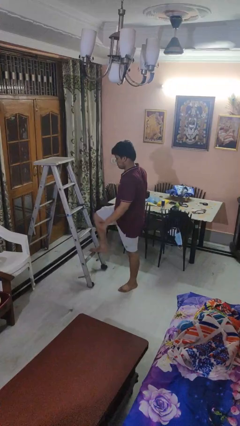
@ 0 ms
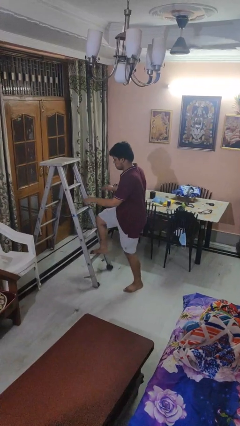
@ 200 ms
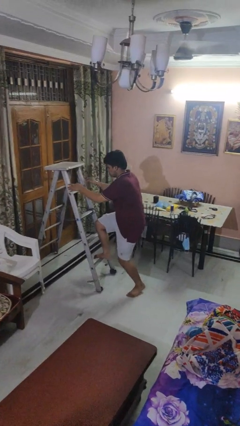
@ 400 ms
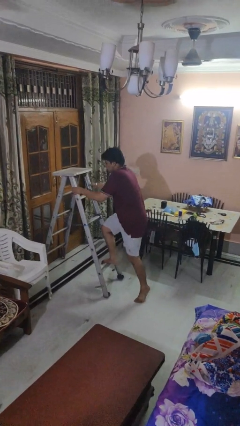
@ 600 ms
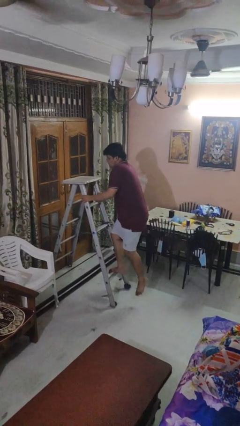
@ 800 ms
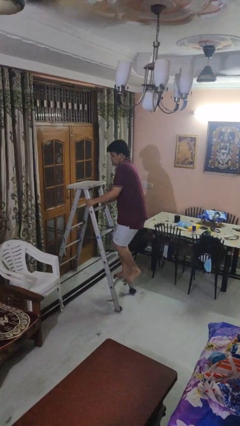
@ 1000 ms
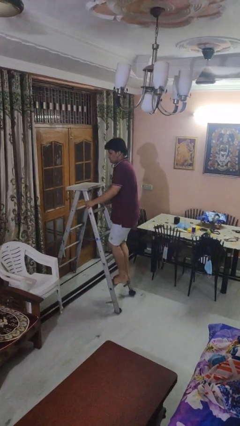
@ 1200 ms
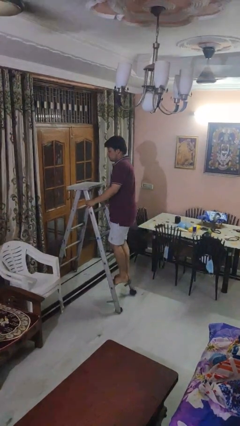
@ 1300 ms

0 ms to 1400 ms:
person climbs up ladder

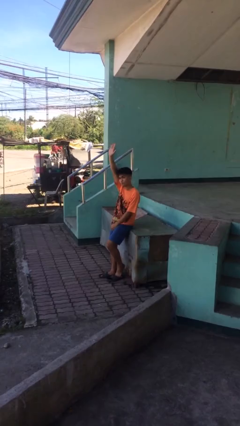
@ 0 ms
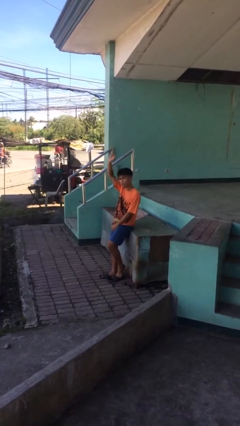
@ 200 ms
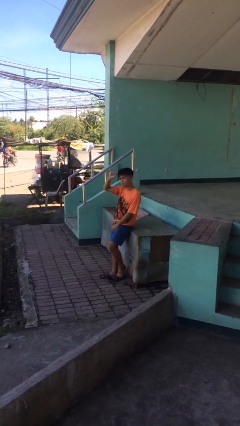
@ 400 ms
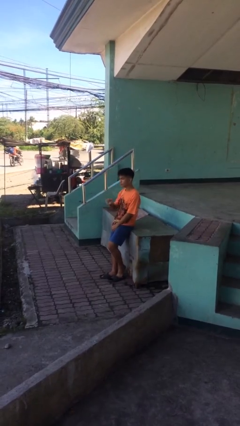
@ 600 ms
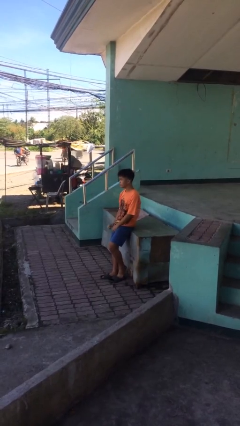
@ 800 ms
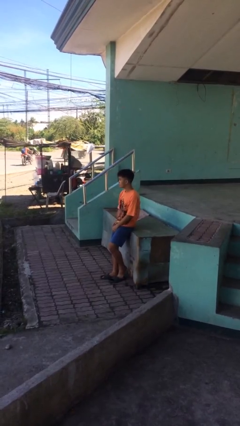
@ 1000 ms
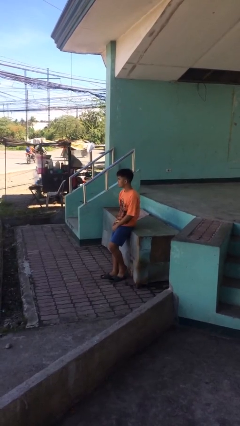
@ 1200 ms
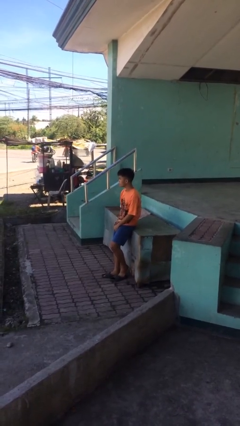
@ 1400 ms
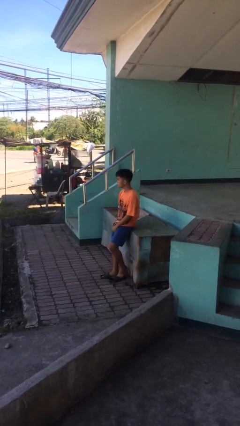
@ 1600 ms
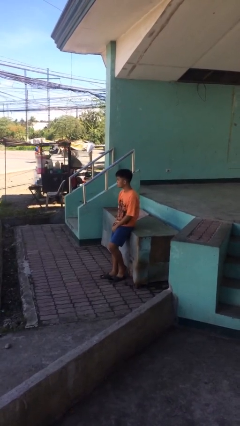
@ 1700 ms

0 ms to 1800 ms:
person gestures lower hand

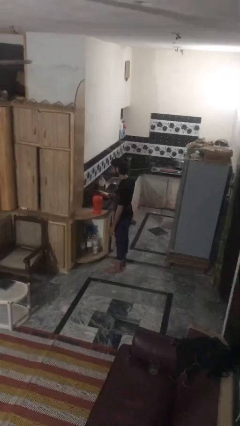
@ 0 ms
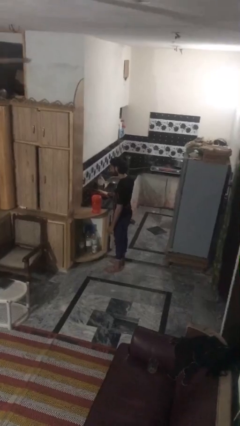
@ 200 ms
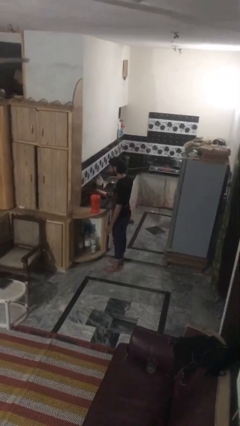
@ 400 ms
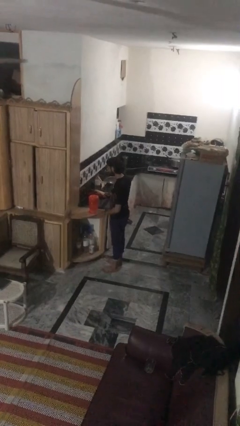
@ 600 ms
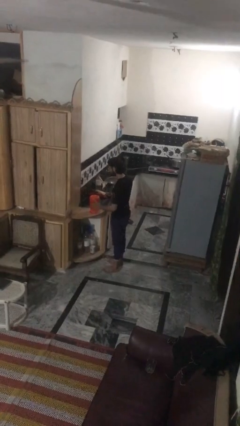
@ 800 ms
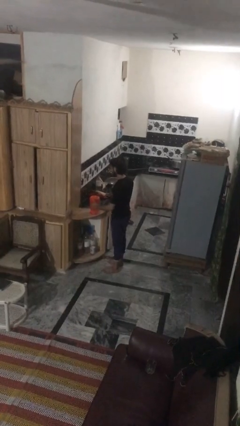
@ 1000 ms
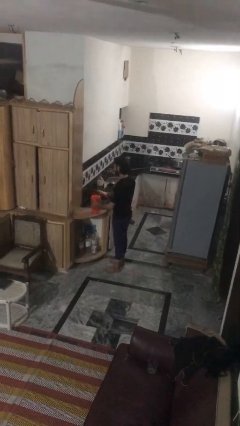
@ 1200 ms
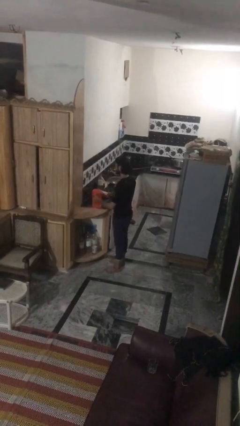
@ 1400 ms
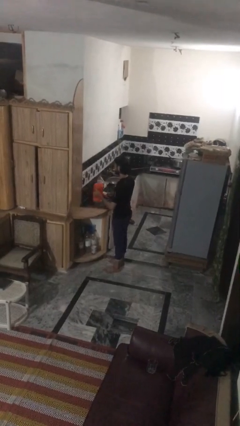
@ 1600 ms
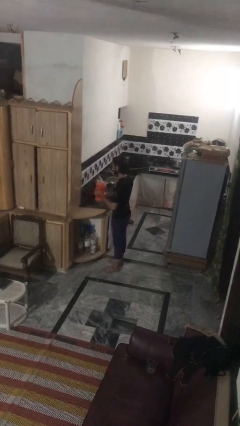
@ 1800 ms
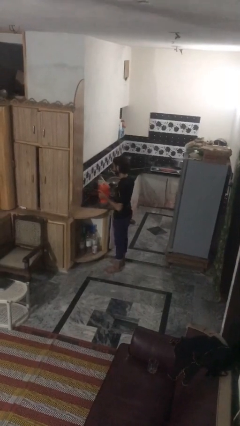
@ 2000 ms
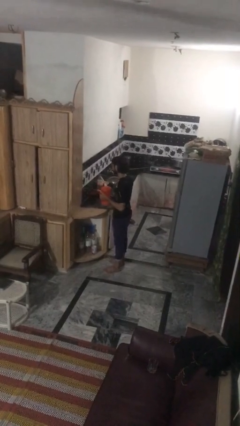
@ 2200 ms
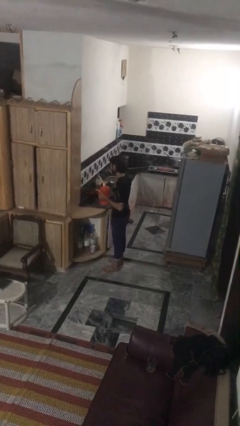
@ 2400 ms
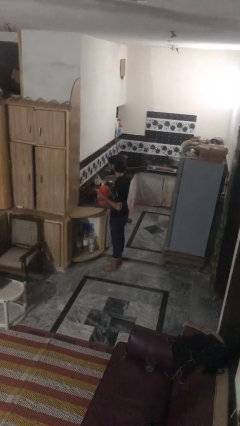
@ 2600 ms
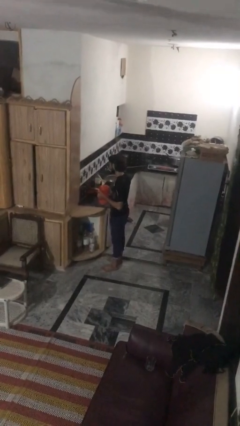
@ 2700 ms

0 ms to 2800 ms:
person picks up object from countertop

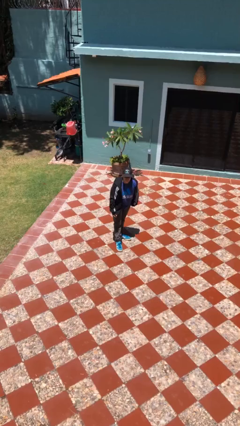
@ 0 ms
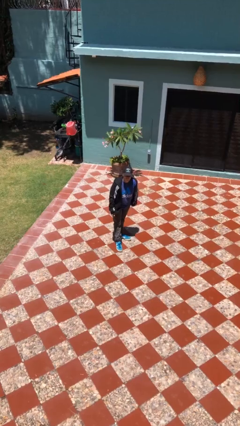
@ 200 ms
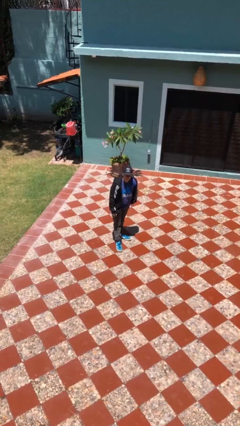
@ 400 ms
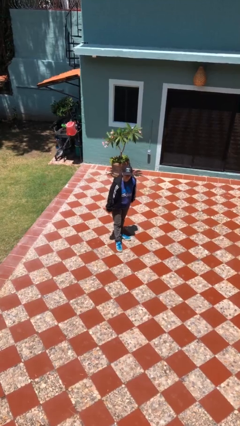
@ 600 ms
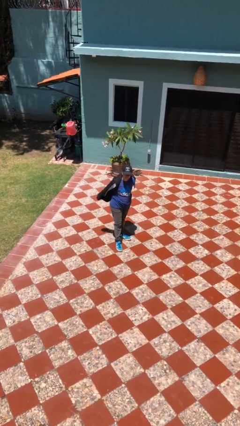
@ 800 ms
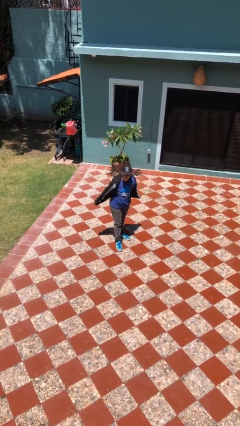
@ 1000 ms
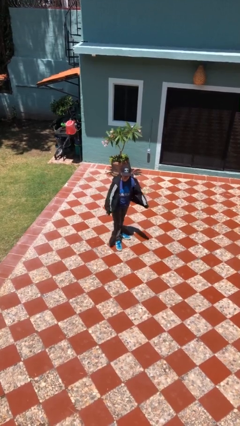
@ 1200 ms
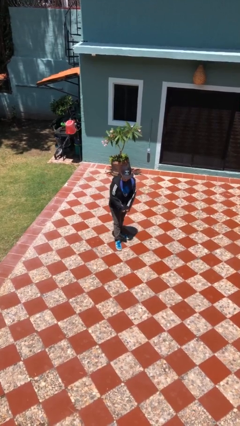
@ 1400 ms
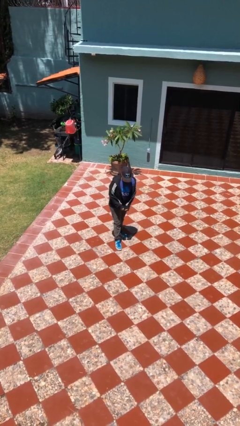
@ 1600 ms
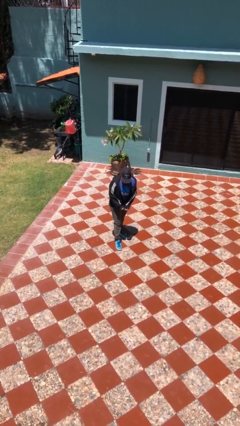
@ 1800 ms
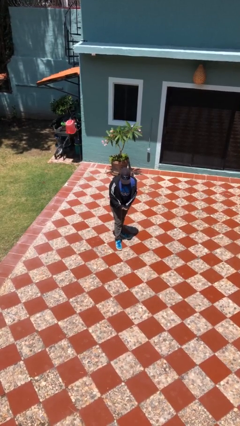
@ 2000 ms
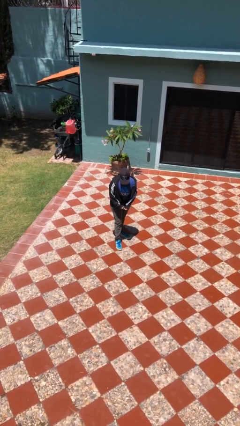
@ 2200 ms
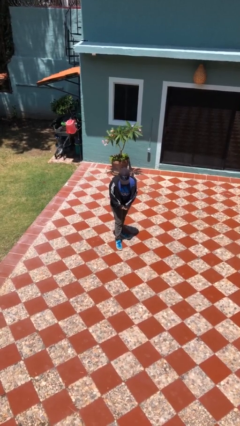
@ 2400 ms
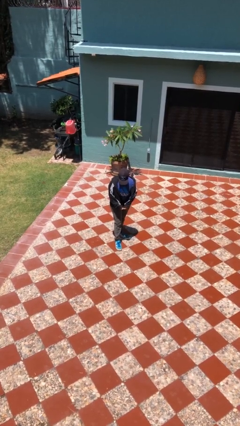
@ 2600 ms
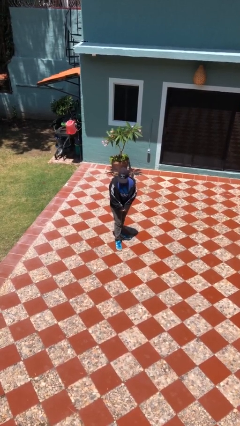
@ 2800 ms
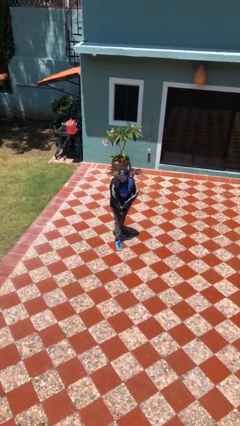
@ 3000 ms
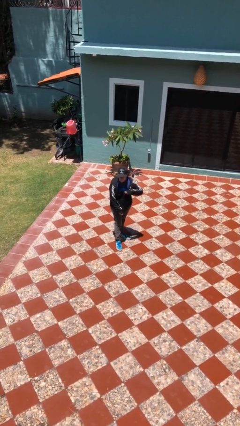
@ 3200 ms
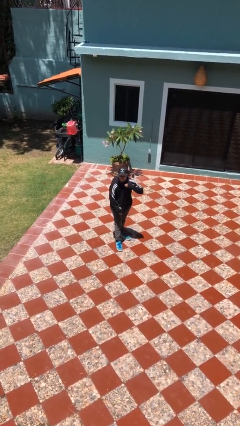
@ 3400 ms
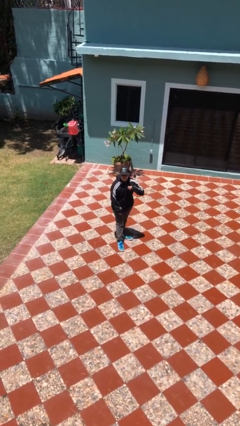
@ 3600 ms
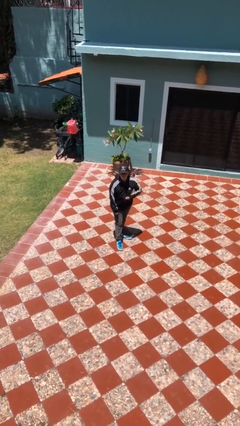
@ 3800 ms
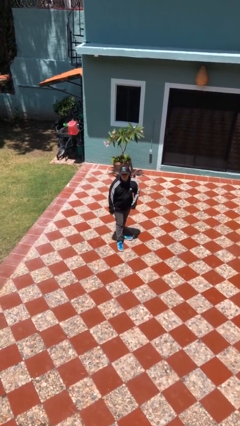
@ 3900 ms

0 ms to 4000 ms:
person zips up jacket

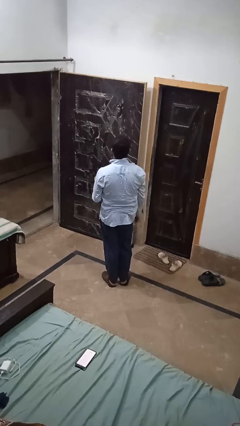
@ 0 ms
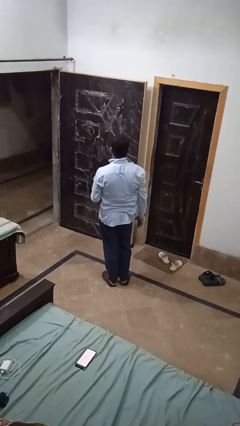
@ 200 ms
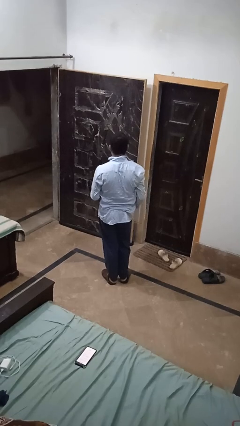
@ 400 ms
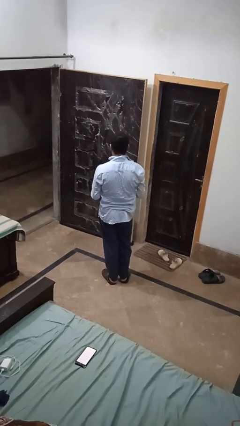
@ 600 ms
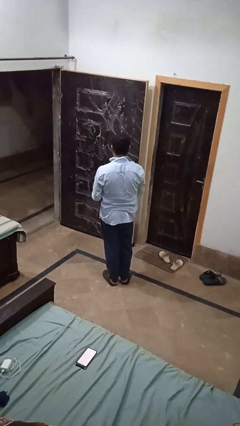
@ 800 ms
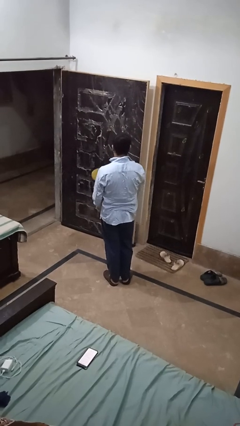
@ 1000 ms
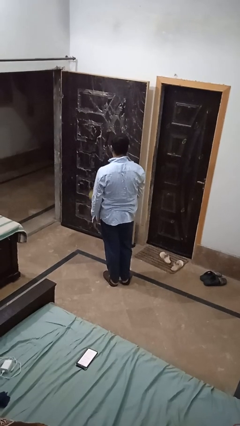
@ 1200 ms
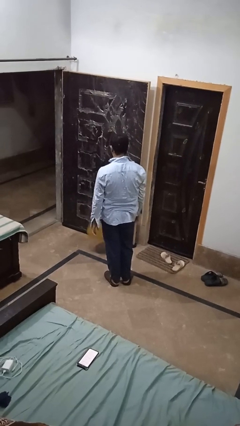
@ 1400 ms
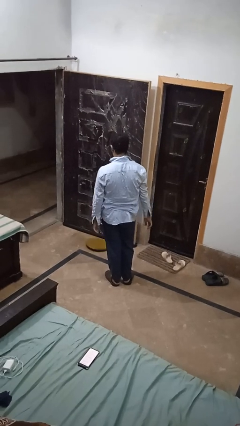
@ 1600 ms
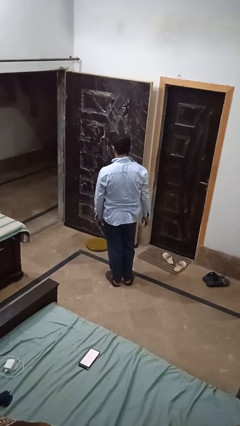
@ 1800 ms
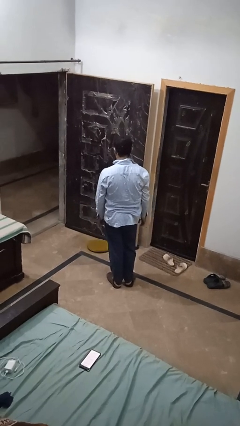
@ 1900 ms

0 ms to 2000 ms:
person throws object to ground

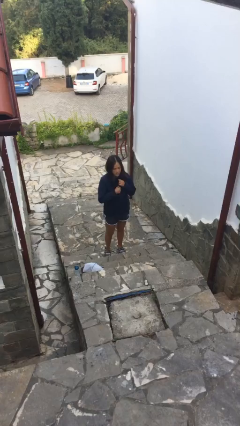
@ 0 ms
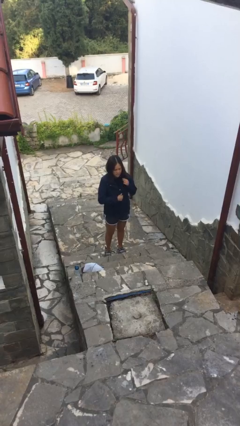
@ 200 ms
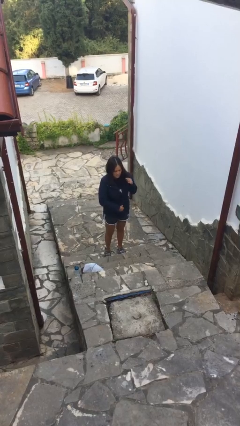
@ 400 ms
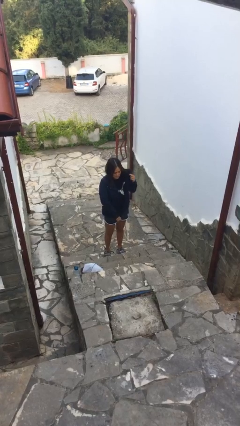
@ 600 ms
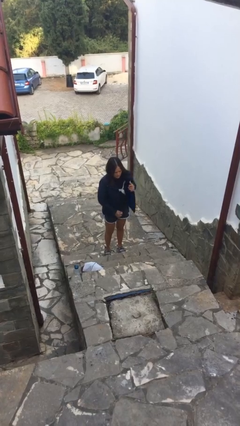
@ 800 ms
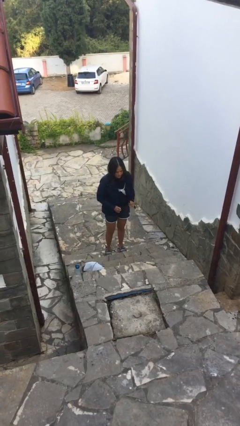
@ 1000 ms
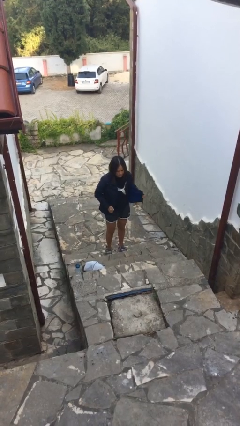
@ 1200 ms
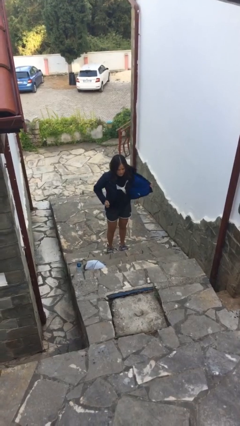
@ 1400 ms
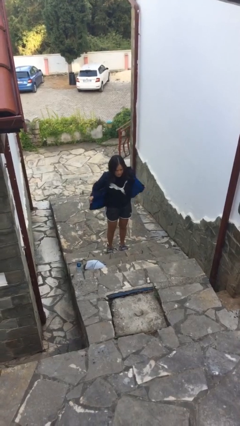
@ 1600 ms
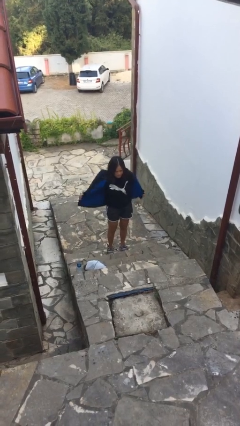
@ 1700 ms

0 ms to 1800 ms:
person unzips jacket

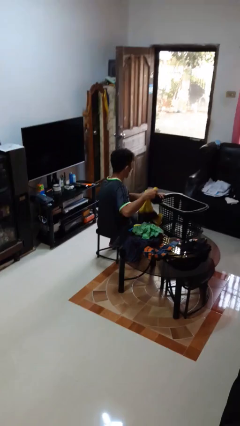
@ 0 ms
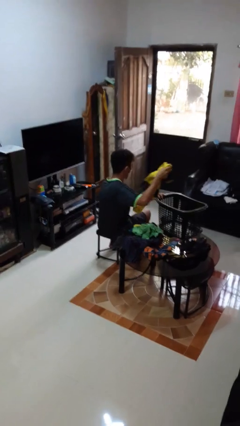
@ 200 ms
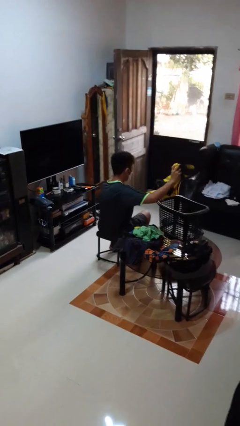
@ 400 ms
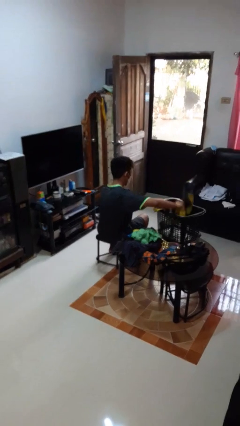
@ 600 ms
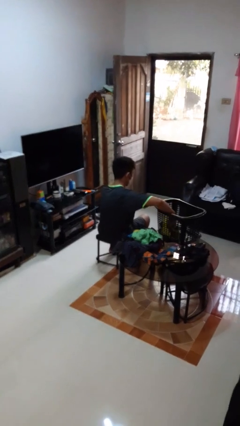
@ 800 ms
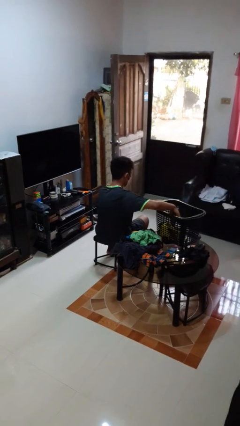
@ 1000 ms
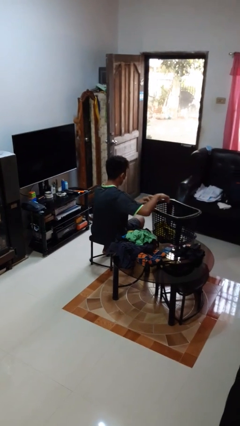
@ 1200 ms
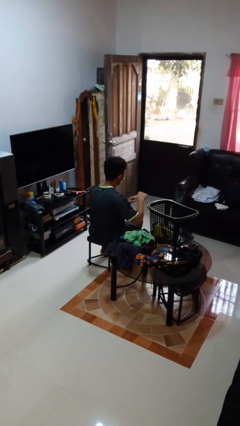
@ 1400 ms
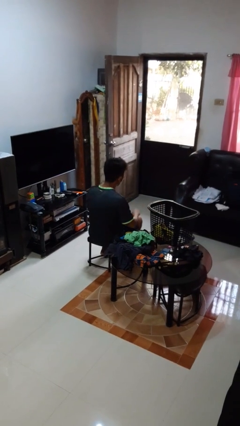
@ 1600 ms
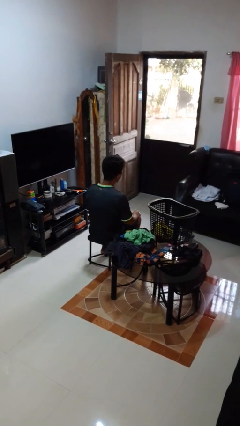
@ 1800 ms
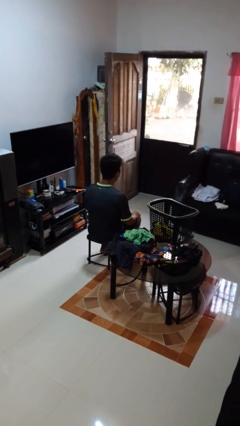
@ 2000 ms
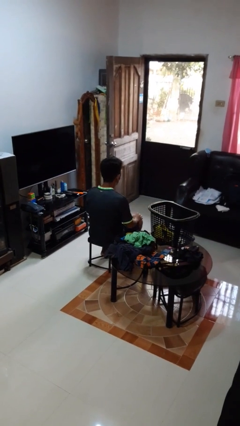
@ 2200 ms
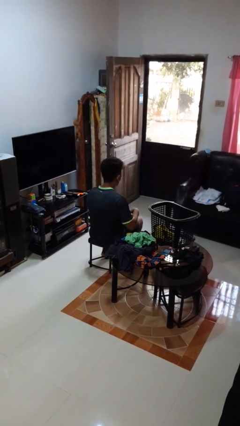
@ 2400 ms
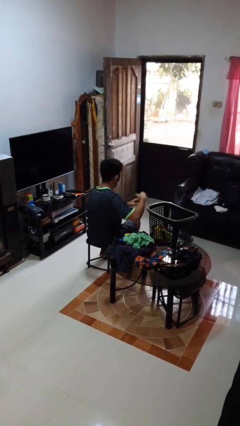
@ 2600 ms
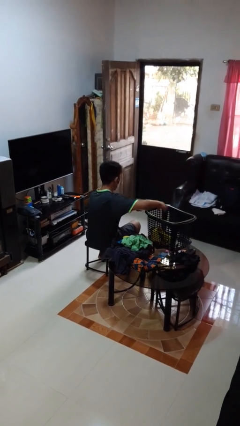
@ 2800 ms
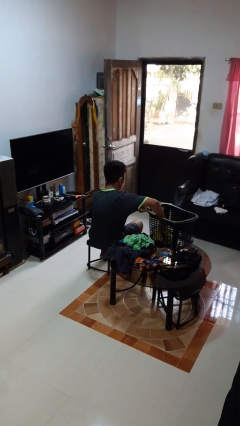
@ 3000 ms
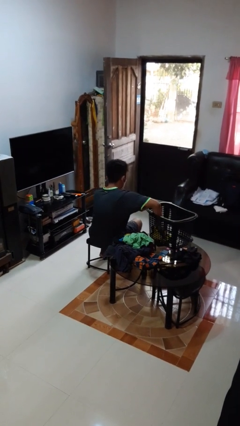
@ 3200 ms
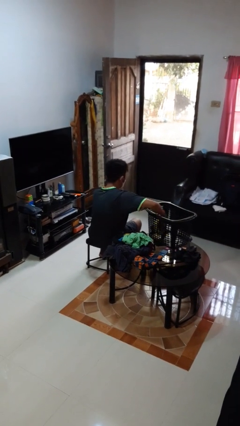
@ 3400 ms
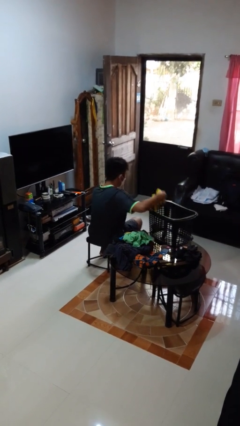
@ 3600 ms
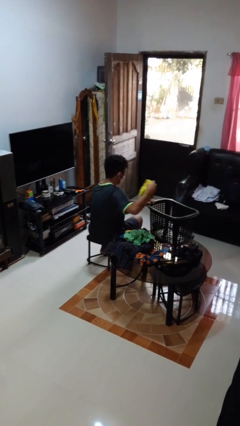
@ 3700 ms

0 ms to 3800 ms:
person puts object into basket
